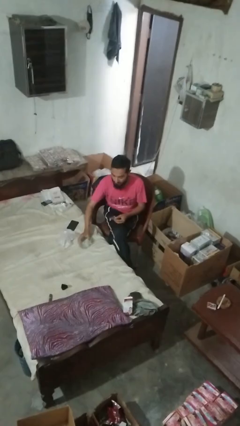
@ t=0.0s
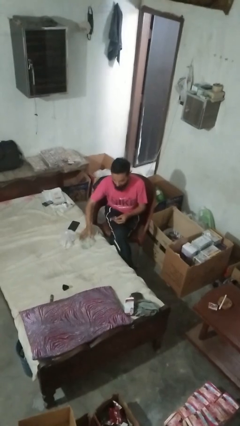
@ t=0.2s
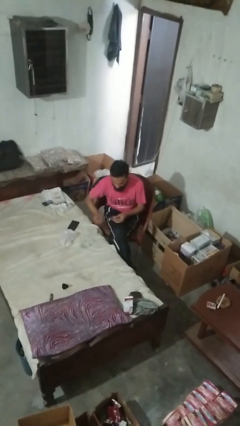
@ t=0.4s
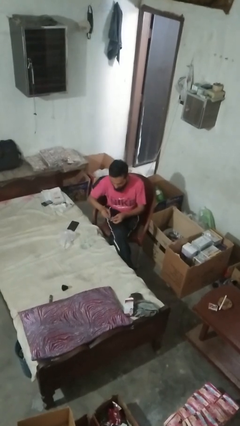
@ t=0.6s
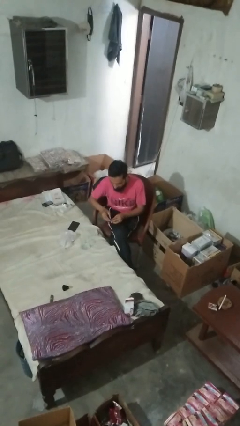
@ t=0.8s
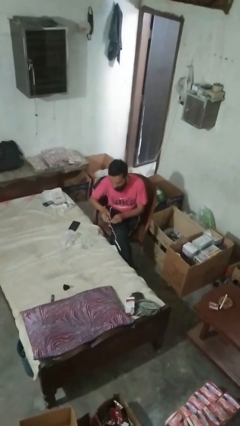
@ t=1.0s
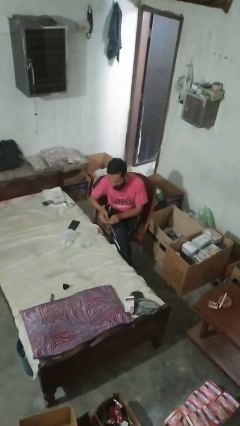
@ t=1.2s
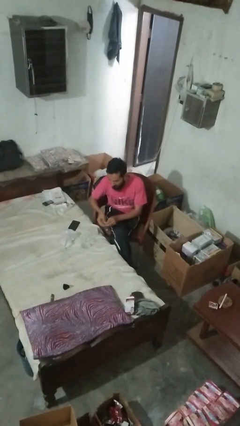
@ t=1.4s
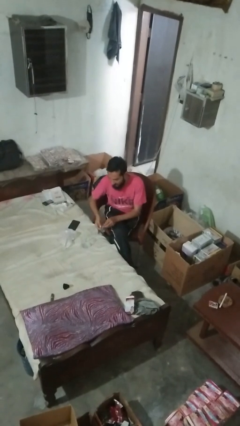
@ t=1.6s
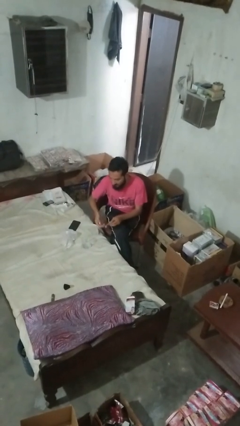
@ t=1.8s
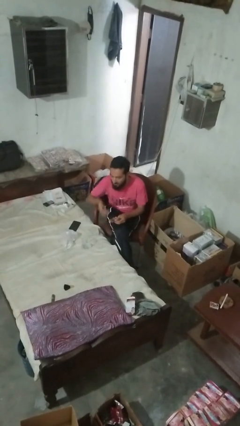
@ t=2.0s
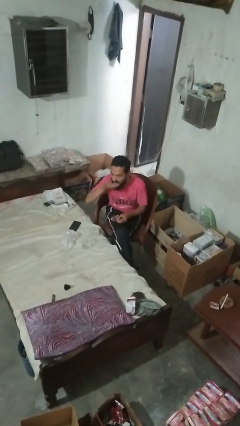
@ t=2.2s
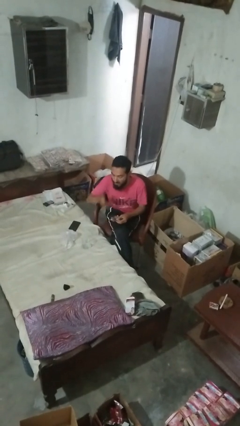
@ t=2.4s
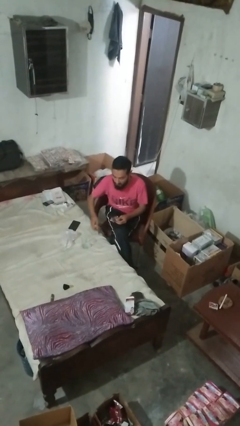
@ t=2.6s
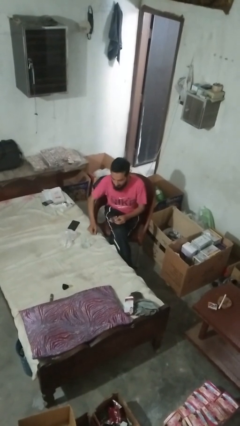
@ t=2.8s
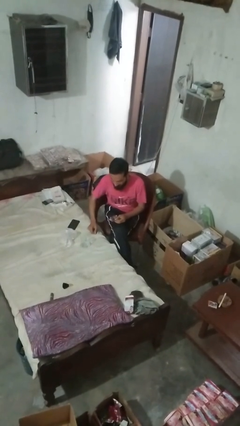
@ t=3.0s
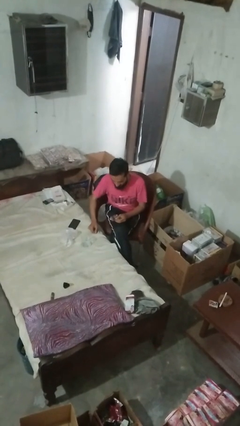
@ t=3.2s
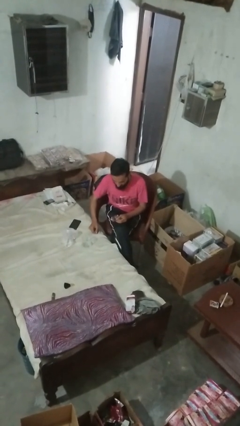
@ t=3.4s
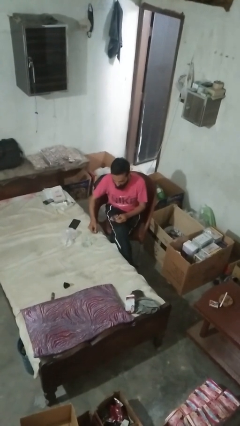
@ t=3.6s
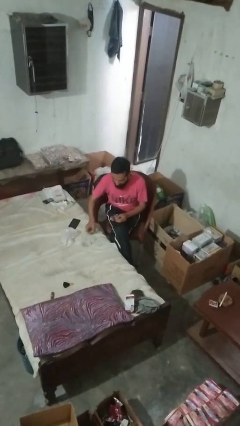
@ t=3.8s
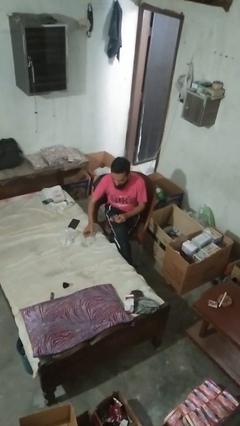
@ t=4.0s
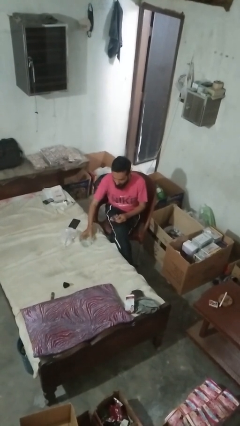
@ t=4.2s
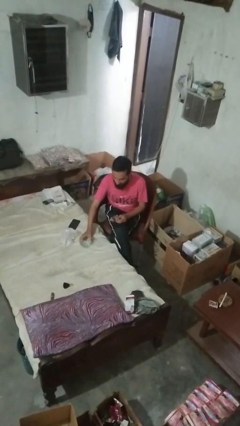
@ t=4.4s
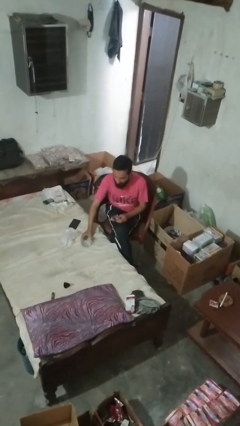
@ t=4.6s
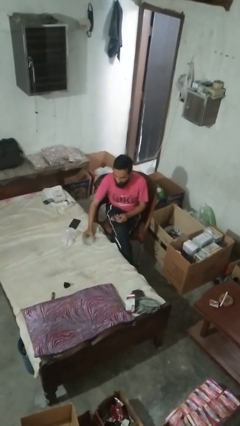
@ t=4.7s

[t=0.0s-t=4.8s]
person takes medicine pills

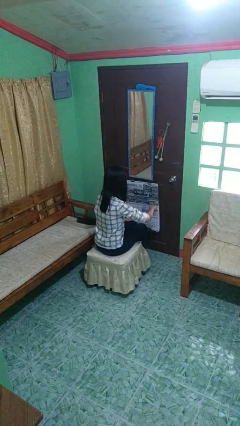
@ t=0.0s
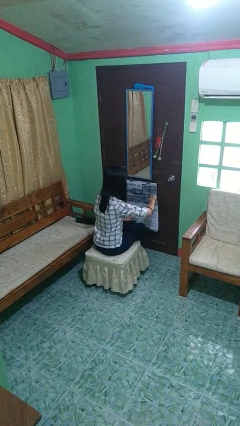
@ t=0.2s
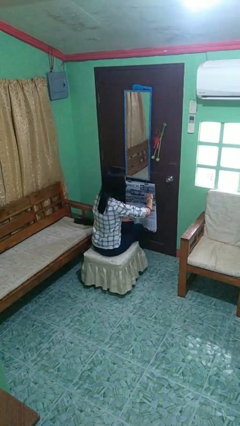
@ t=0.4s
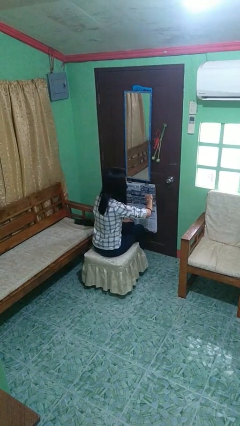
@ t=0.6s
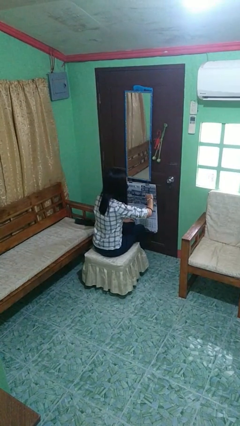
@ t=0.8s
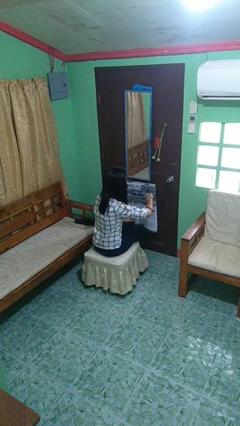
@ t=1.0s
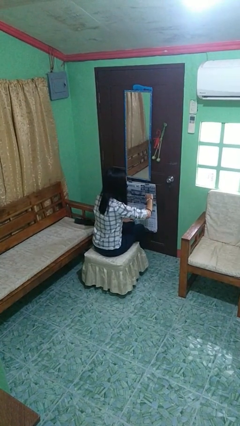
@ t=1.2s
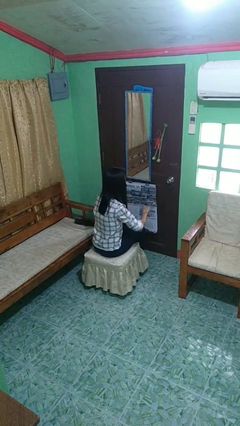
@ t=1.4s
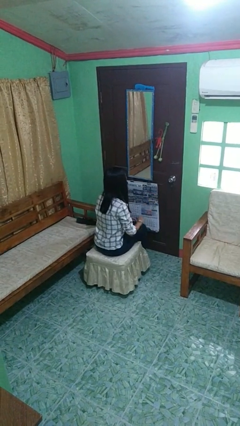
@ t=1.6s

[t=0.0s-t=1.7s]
person looks at wristwatch

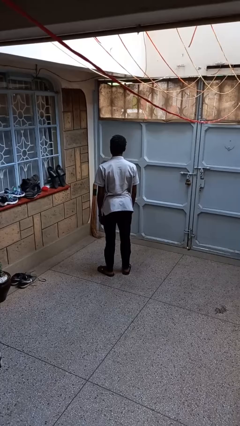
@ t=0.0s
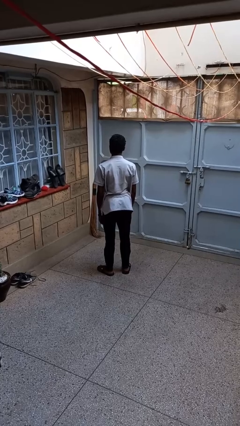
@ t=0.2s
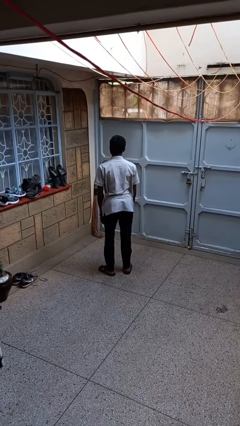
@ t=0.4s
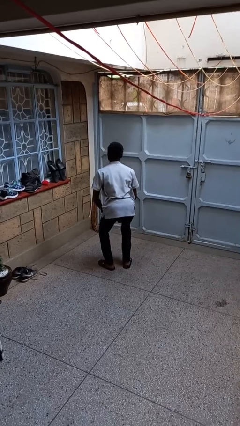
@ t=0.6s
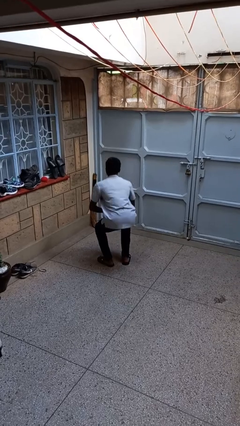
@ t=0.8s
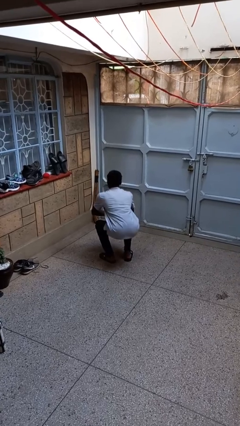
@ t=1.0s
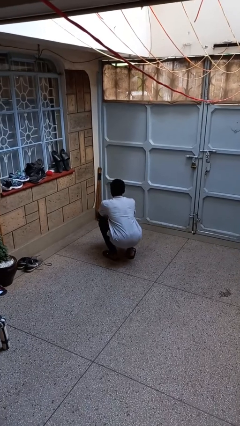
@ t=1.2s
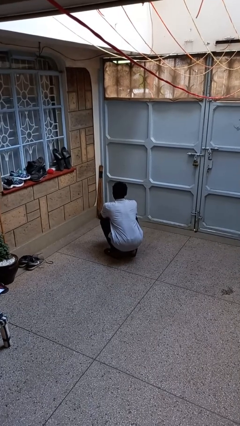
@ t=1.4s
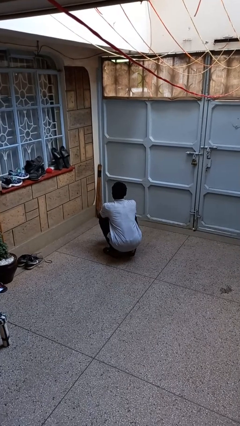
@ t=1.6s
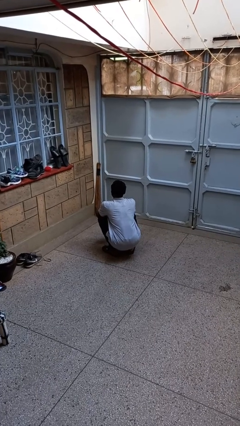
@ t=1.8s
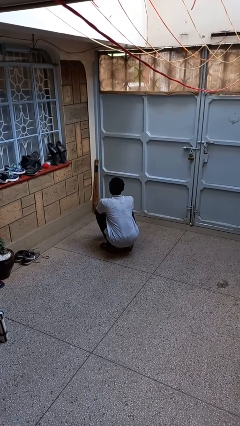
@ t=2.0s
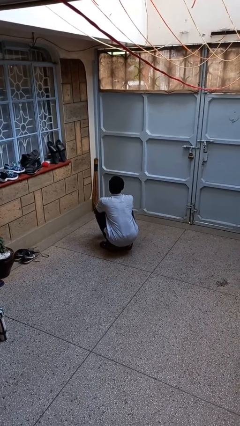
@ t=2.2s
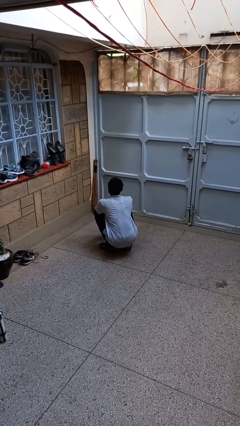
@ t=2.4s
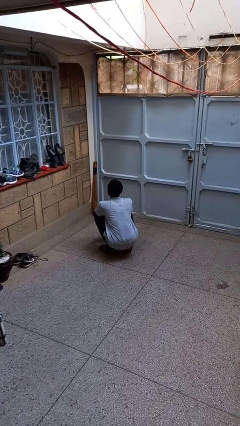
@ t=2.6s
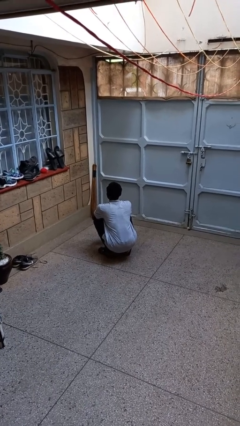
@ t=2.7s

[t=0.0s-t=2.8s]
person squats

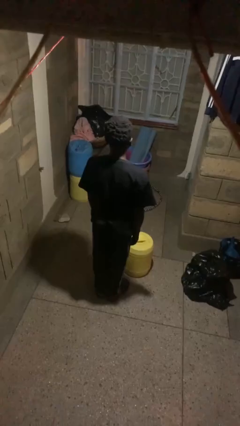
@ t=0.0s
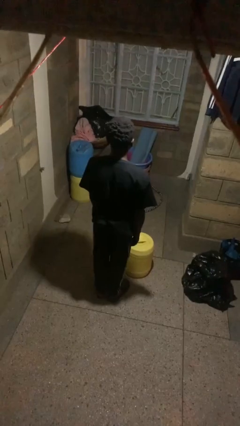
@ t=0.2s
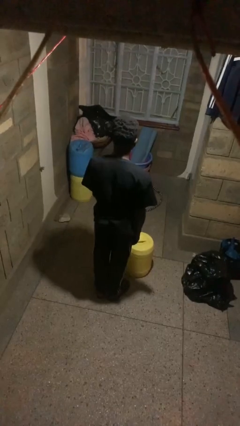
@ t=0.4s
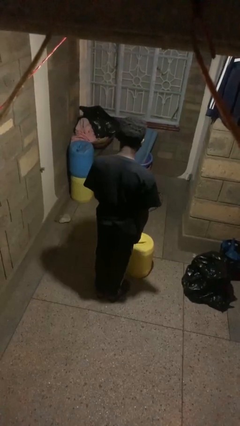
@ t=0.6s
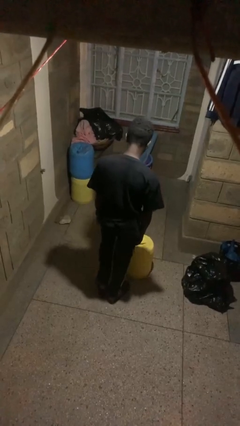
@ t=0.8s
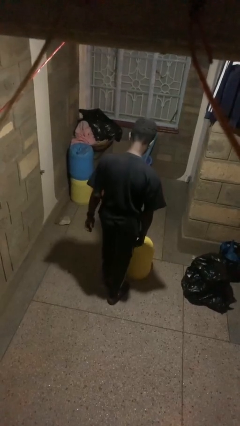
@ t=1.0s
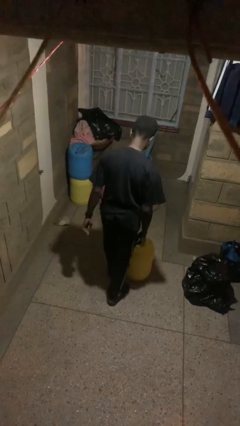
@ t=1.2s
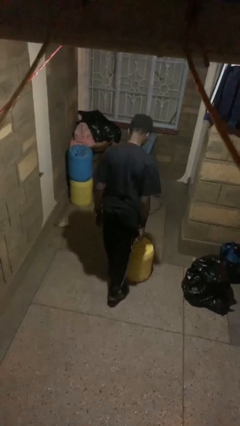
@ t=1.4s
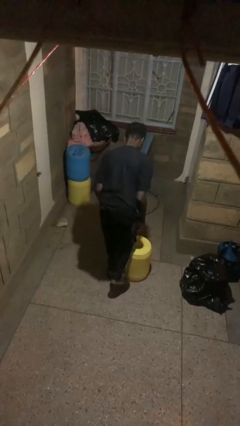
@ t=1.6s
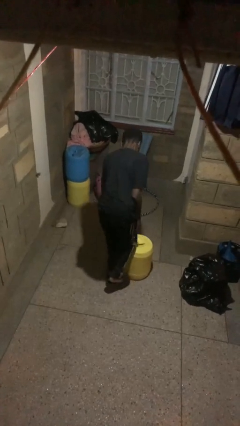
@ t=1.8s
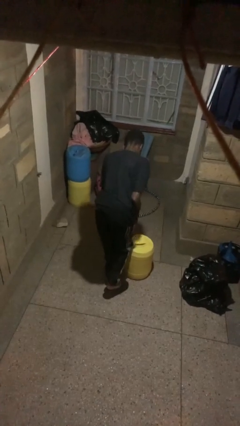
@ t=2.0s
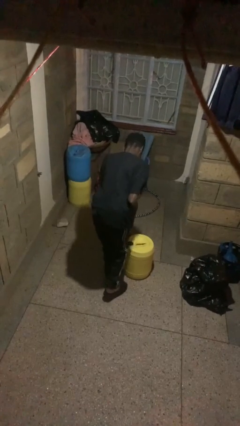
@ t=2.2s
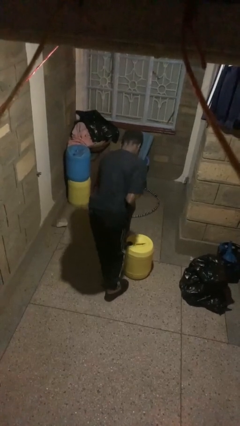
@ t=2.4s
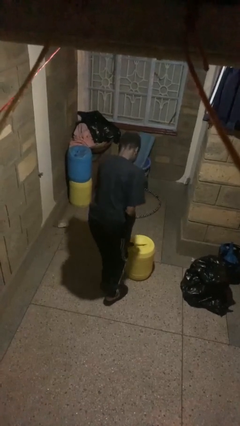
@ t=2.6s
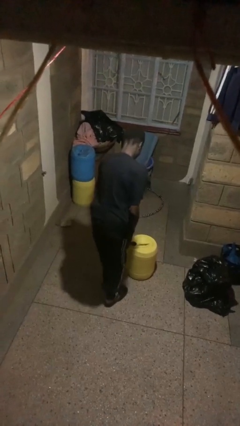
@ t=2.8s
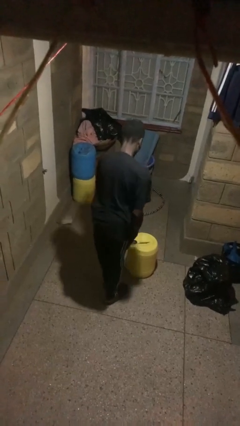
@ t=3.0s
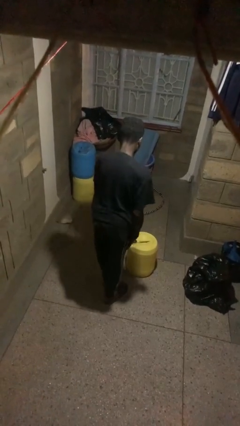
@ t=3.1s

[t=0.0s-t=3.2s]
person stubs toe

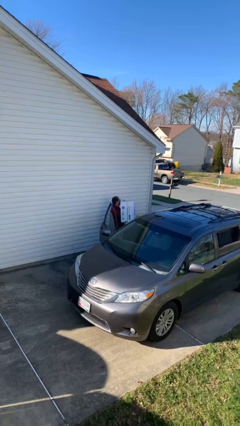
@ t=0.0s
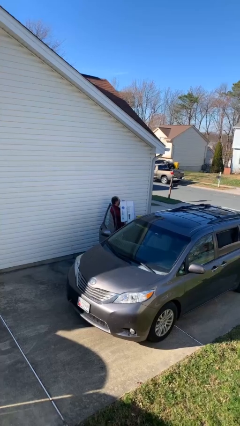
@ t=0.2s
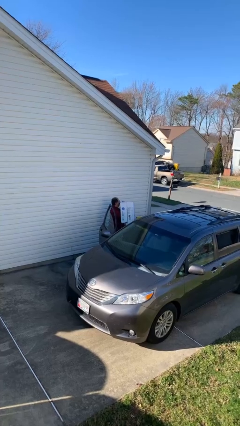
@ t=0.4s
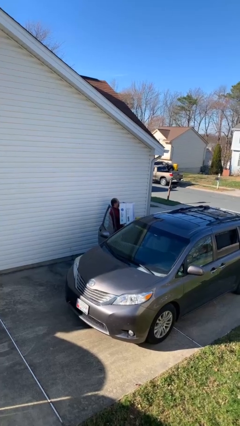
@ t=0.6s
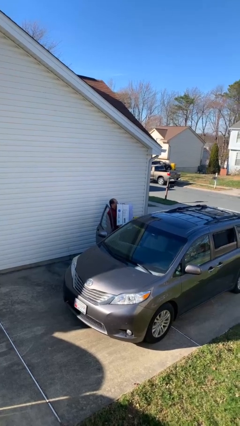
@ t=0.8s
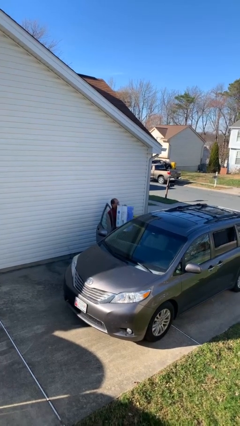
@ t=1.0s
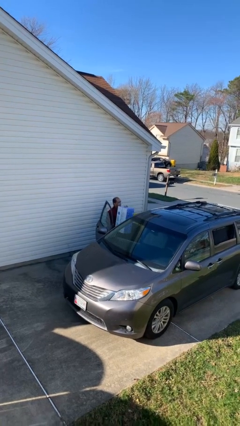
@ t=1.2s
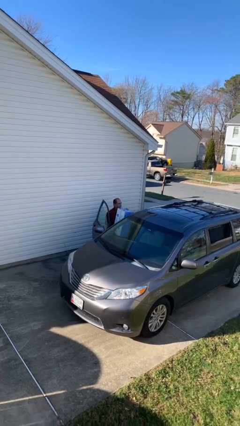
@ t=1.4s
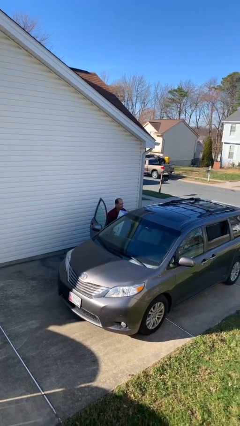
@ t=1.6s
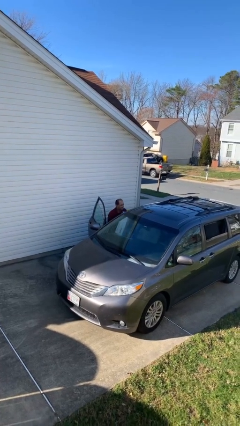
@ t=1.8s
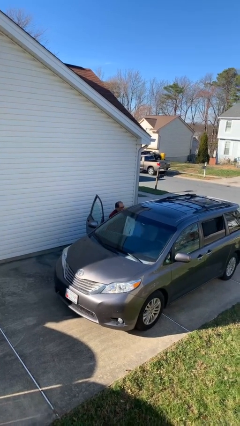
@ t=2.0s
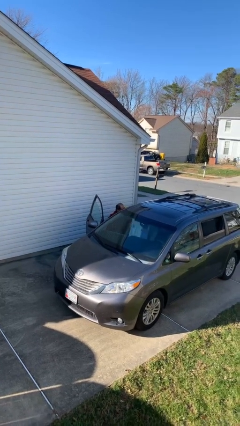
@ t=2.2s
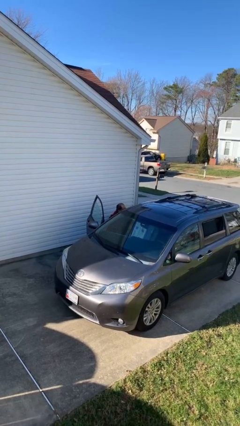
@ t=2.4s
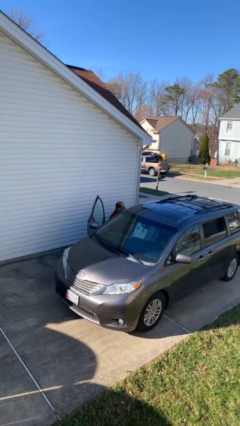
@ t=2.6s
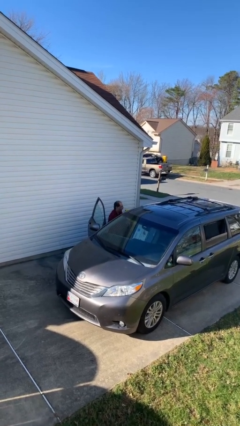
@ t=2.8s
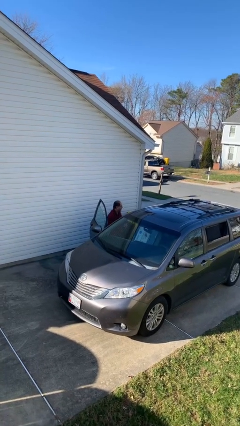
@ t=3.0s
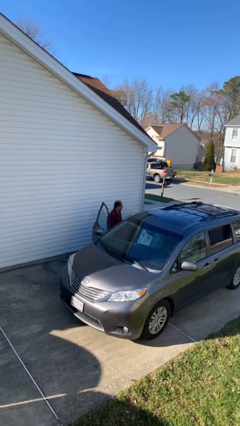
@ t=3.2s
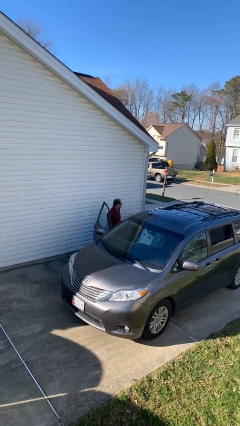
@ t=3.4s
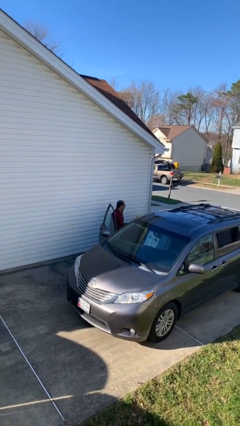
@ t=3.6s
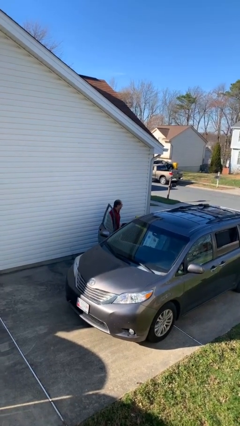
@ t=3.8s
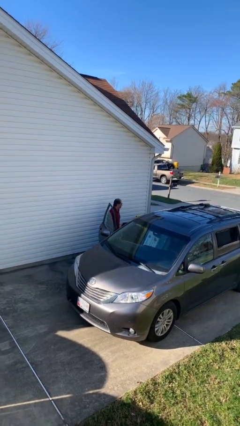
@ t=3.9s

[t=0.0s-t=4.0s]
person loads car

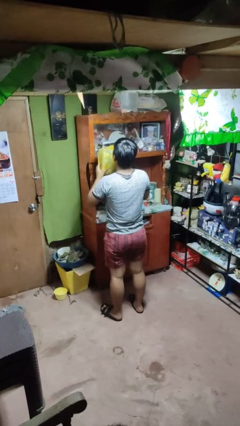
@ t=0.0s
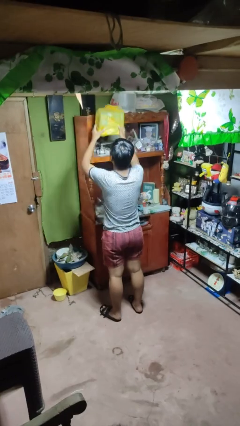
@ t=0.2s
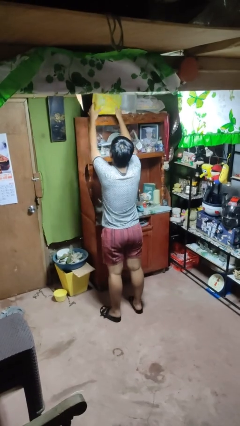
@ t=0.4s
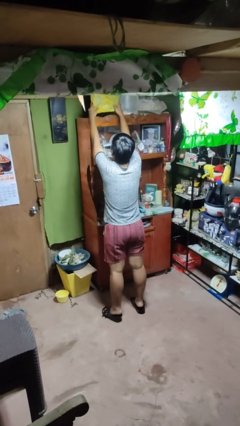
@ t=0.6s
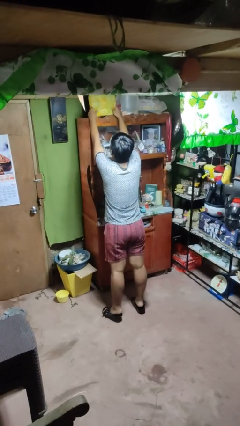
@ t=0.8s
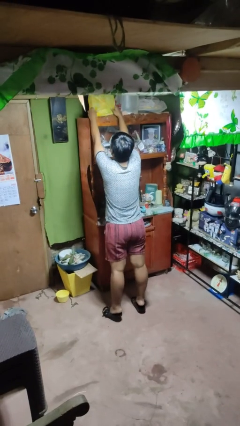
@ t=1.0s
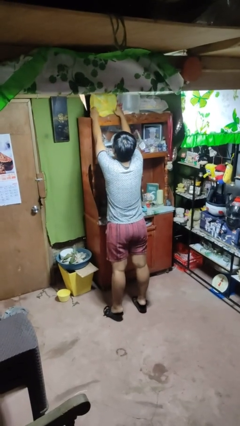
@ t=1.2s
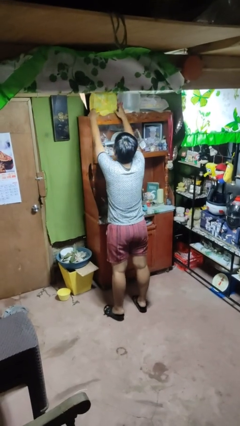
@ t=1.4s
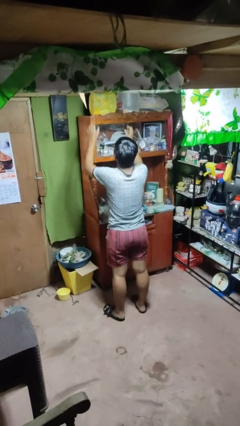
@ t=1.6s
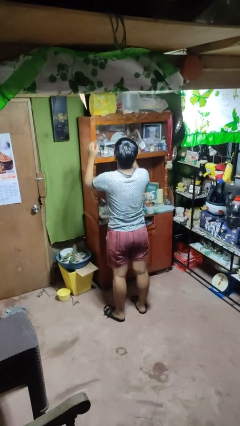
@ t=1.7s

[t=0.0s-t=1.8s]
person puts down object on shelf
